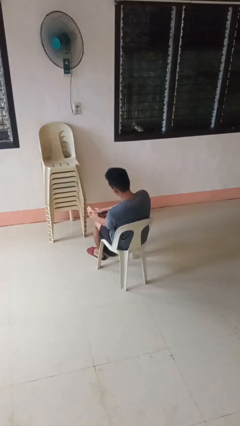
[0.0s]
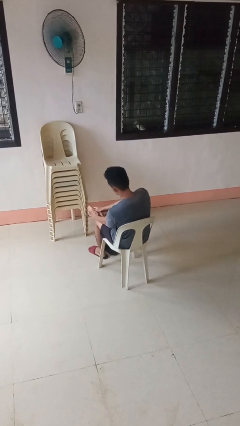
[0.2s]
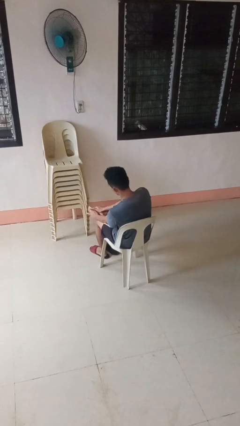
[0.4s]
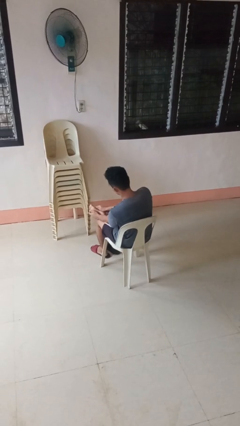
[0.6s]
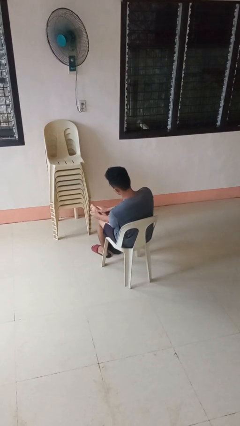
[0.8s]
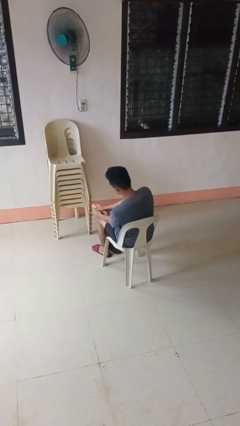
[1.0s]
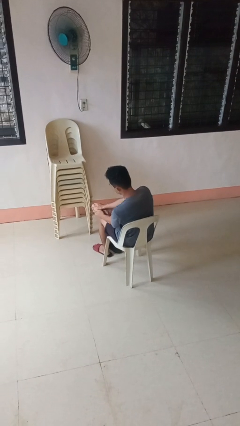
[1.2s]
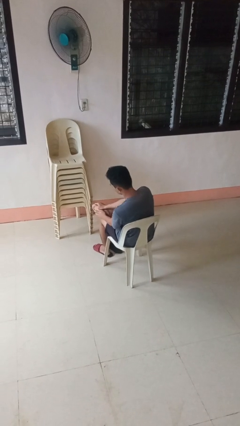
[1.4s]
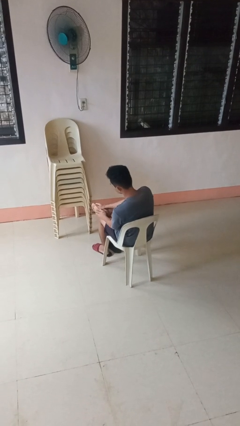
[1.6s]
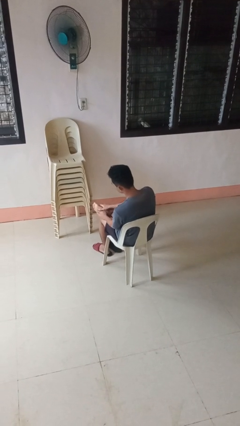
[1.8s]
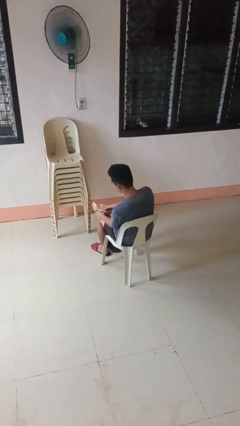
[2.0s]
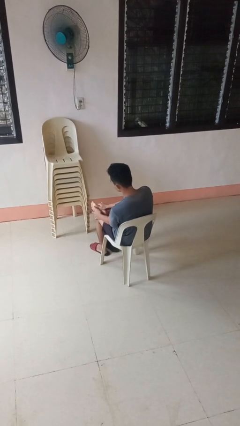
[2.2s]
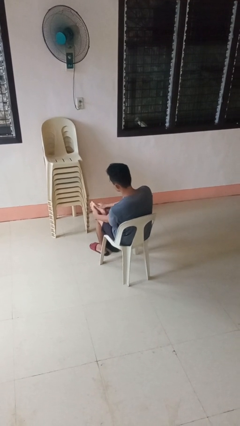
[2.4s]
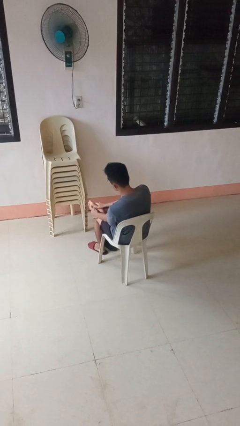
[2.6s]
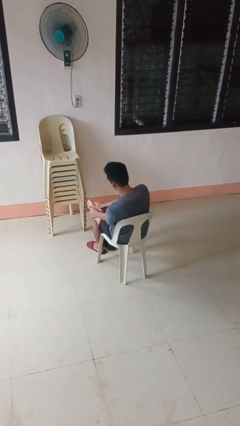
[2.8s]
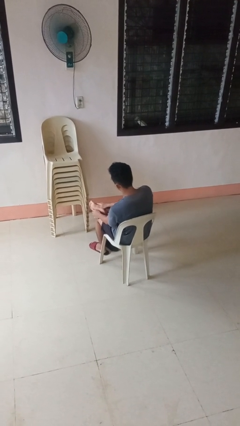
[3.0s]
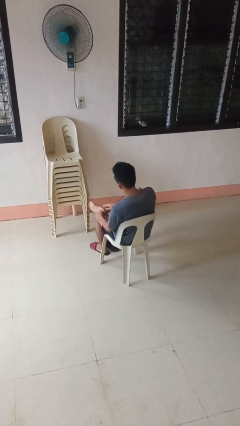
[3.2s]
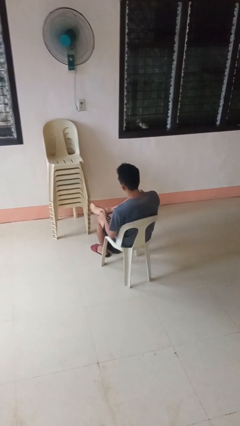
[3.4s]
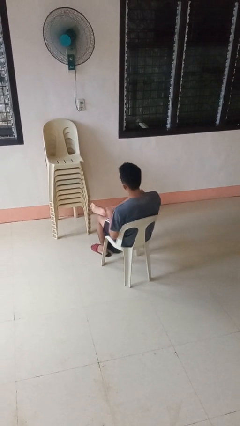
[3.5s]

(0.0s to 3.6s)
person rubs foot

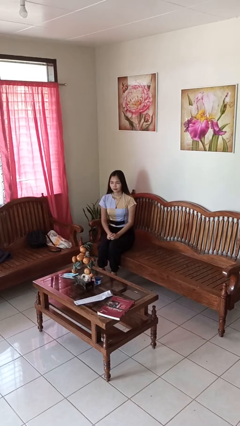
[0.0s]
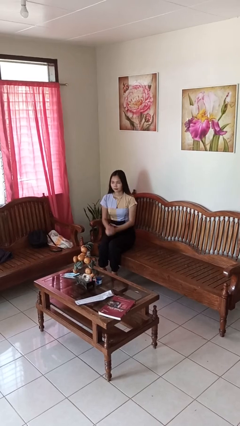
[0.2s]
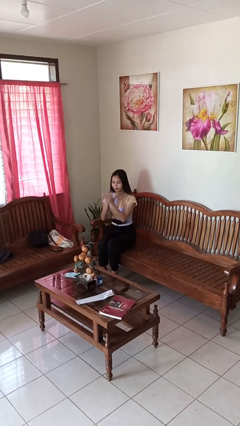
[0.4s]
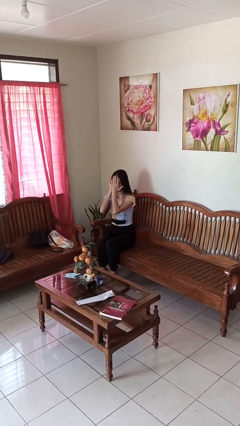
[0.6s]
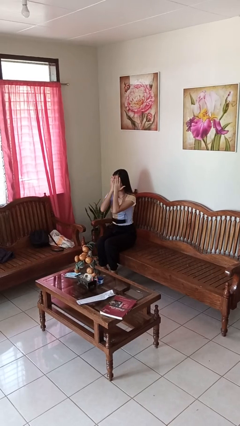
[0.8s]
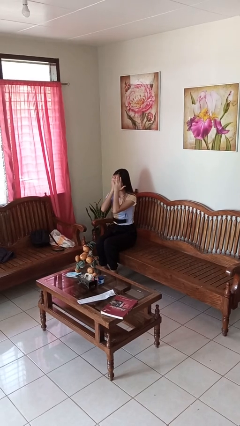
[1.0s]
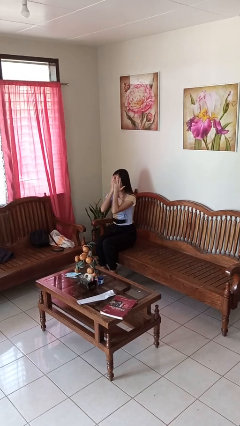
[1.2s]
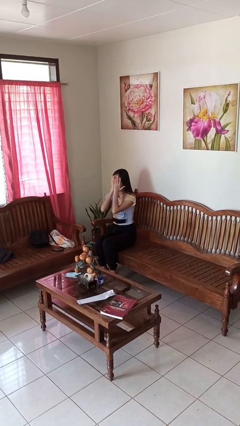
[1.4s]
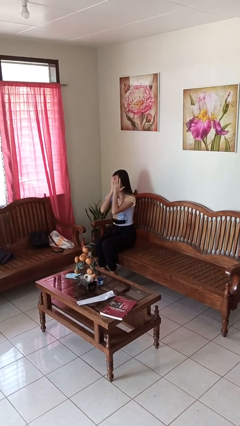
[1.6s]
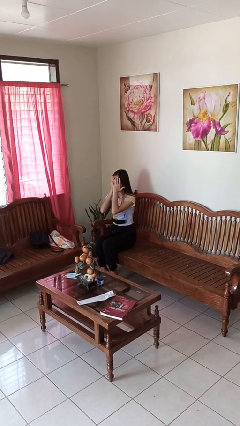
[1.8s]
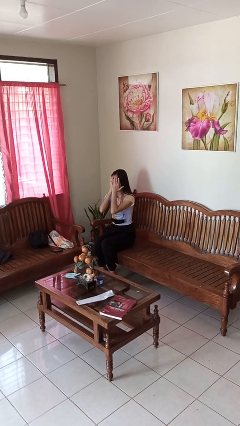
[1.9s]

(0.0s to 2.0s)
person covers face with hands

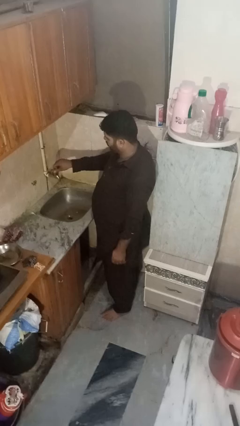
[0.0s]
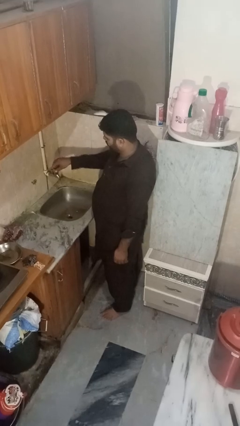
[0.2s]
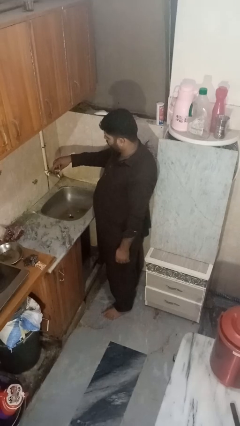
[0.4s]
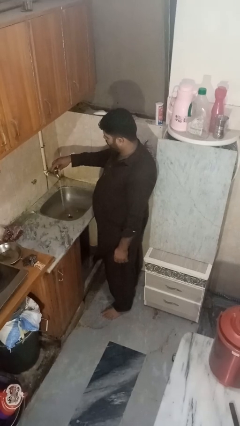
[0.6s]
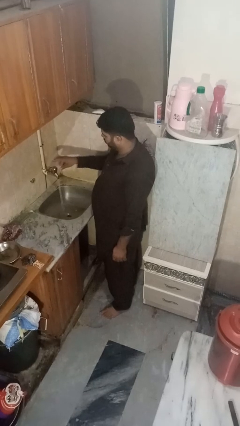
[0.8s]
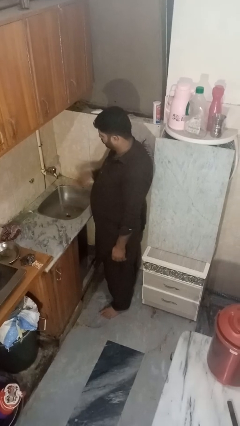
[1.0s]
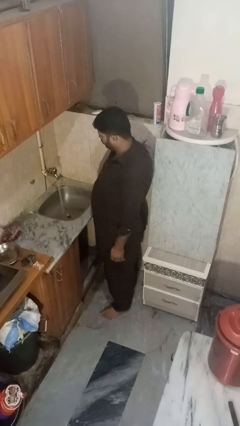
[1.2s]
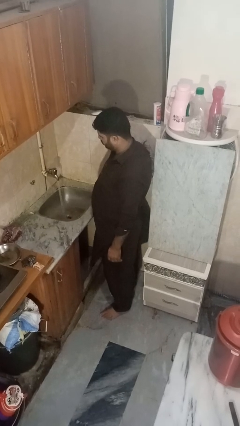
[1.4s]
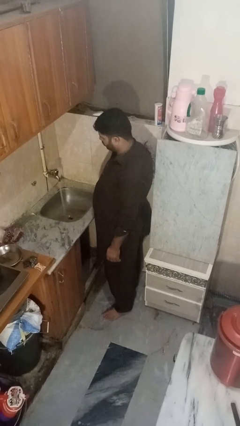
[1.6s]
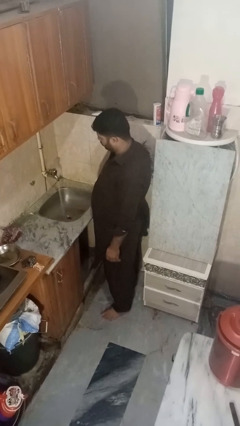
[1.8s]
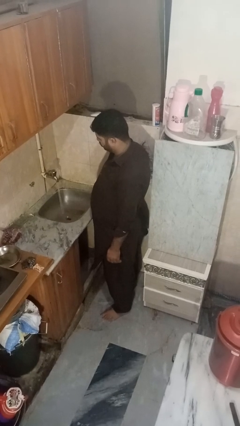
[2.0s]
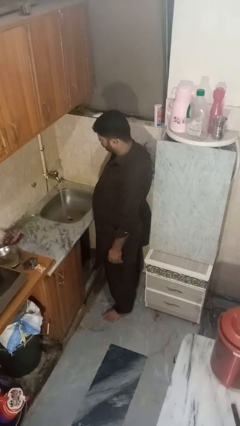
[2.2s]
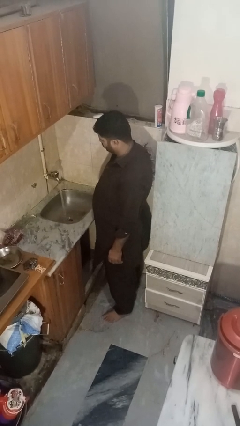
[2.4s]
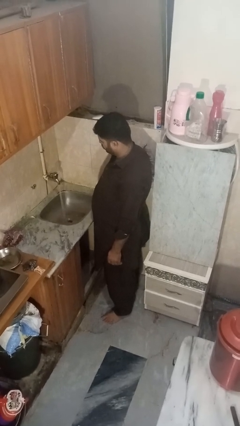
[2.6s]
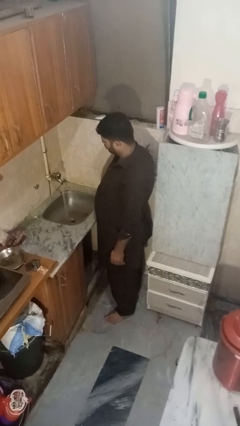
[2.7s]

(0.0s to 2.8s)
person turns on faucet

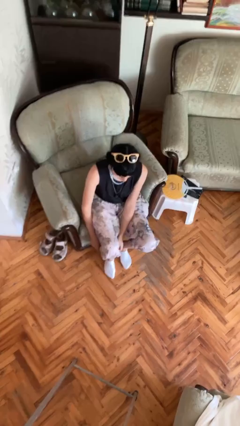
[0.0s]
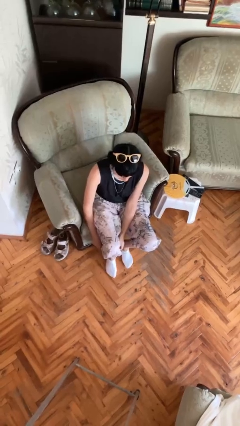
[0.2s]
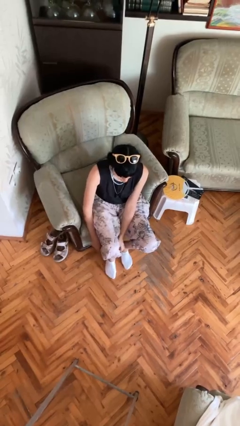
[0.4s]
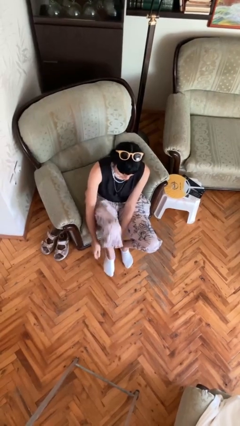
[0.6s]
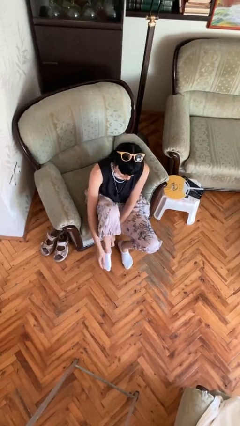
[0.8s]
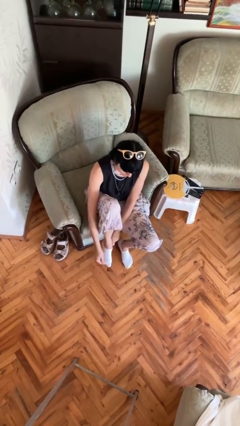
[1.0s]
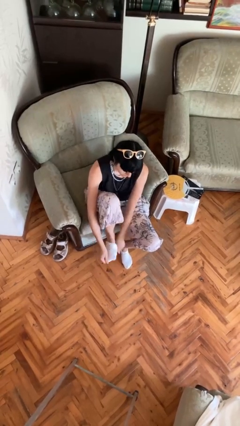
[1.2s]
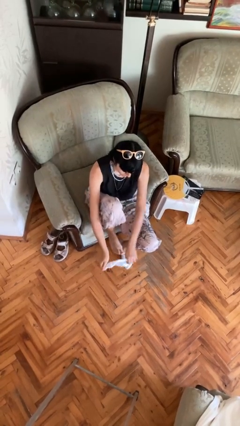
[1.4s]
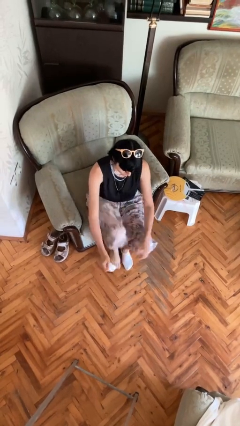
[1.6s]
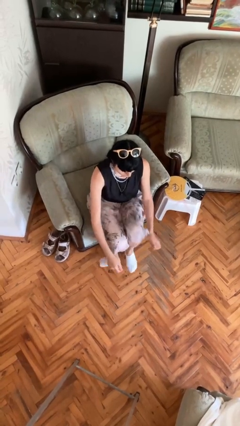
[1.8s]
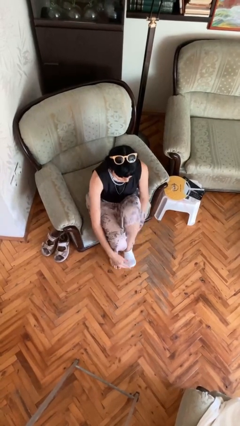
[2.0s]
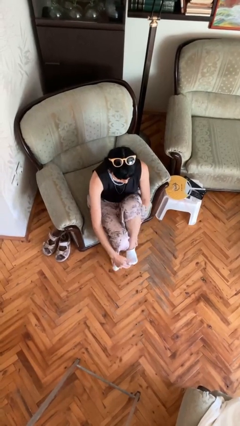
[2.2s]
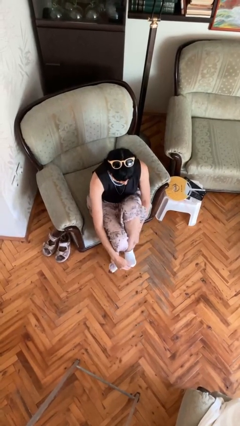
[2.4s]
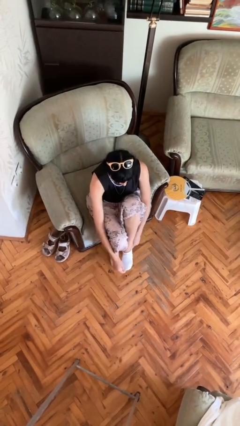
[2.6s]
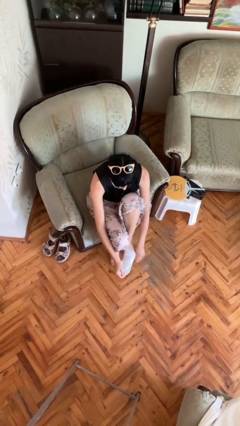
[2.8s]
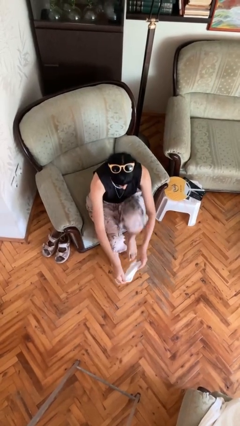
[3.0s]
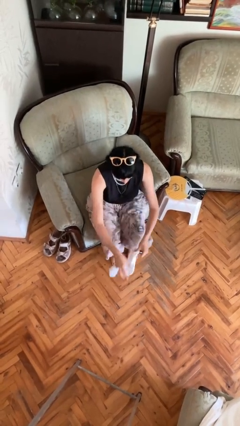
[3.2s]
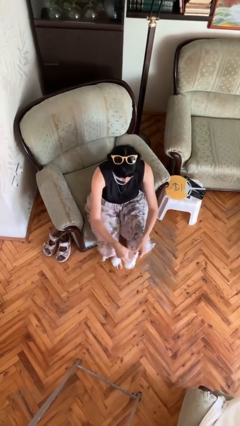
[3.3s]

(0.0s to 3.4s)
person takes off socks

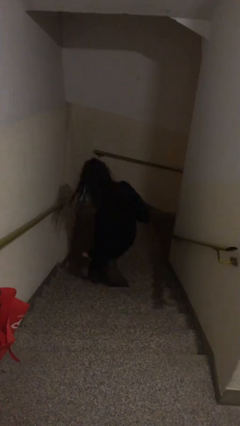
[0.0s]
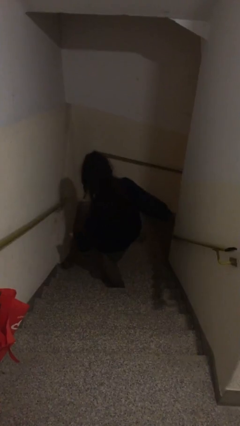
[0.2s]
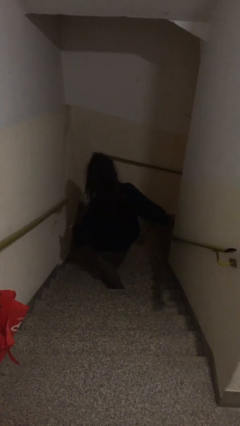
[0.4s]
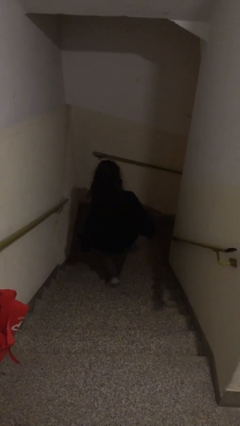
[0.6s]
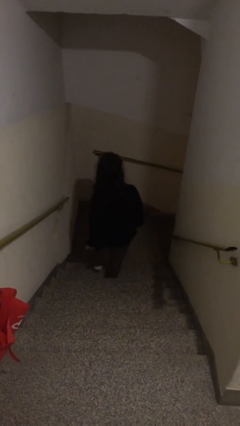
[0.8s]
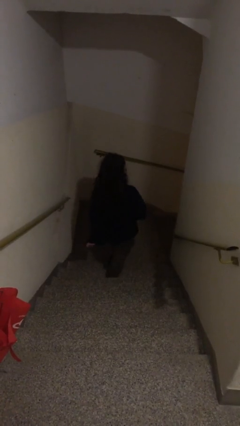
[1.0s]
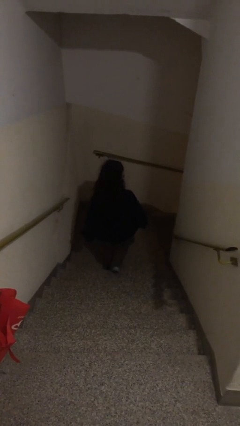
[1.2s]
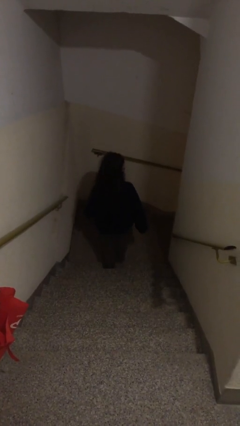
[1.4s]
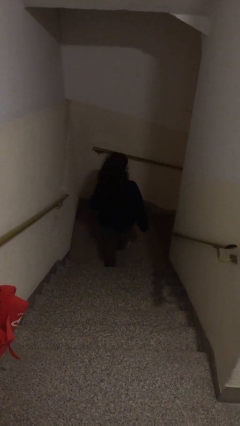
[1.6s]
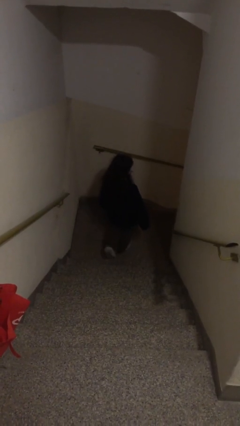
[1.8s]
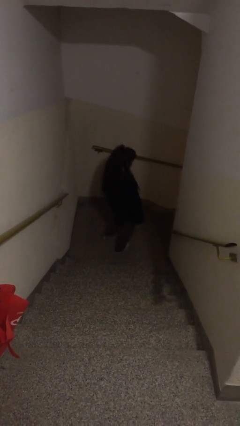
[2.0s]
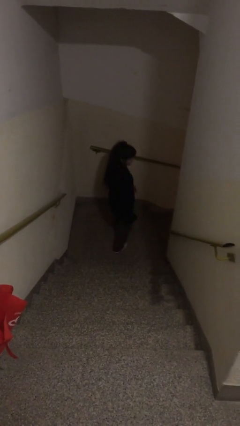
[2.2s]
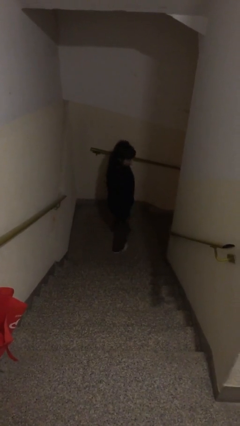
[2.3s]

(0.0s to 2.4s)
person climbs down stairs

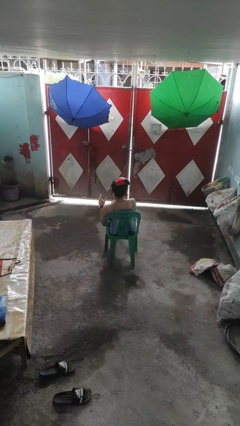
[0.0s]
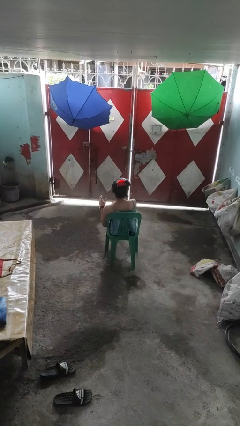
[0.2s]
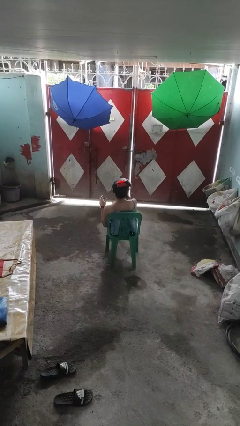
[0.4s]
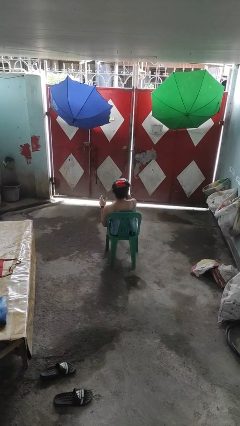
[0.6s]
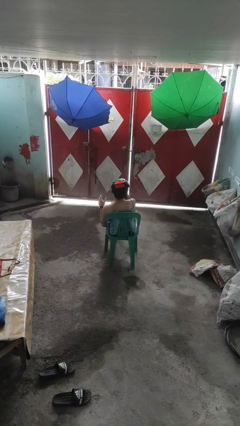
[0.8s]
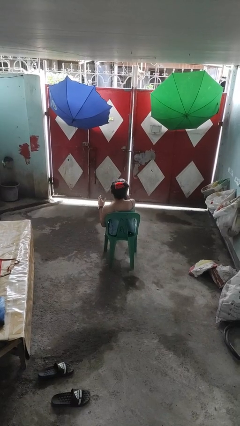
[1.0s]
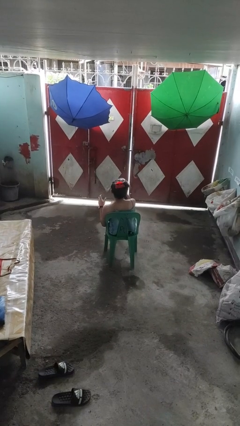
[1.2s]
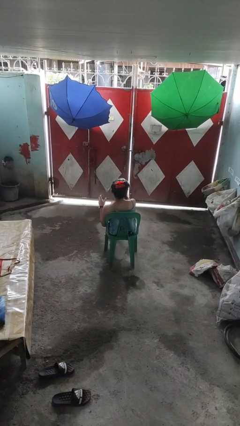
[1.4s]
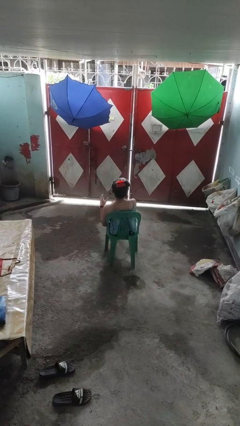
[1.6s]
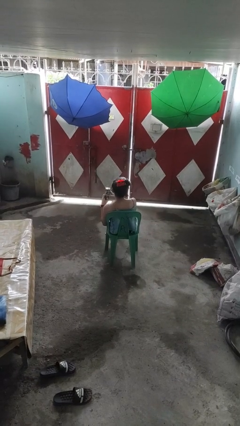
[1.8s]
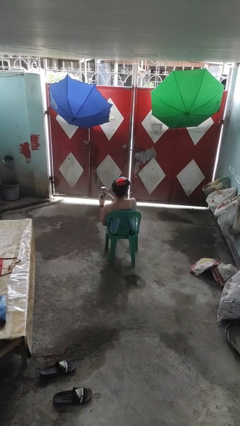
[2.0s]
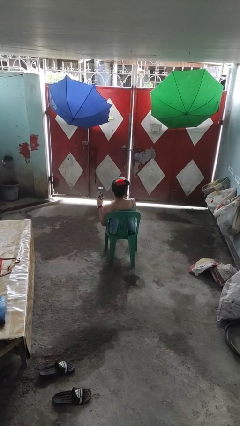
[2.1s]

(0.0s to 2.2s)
person drinks from beverage can

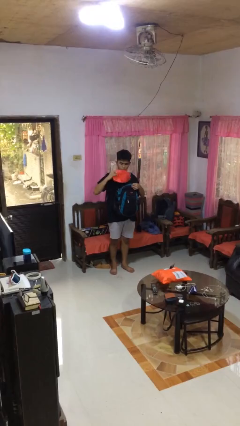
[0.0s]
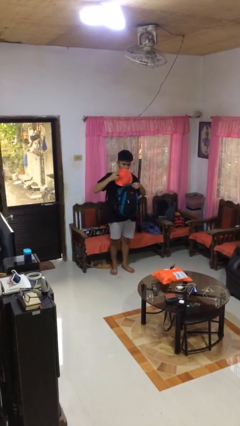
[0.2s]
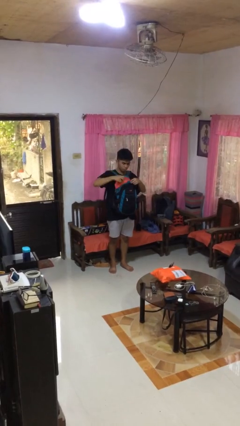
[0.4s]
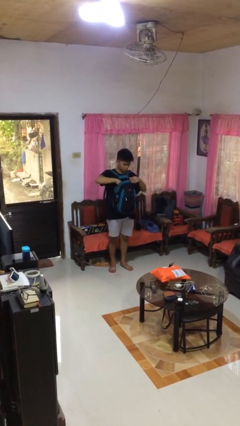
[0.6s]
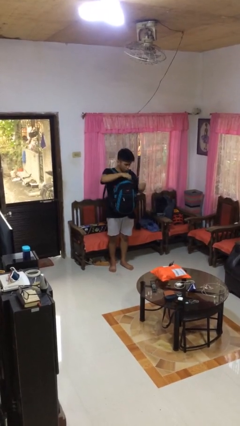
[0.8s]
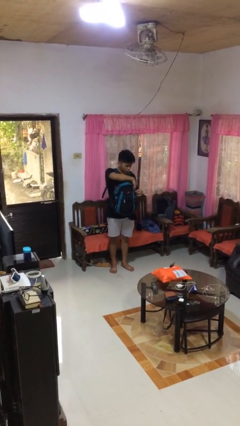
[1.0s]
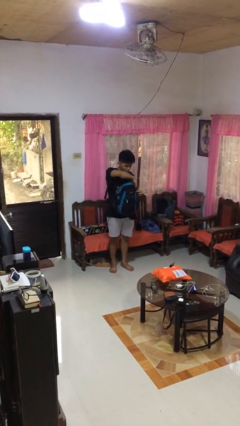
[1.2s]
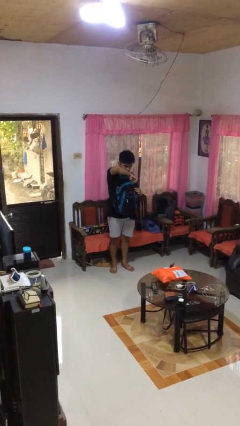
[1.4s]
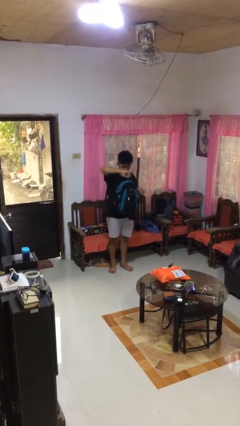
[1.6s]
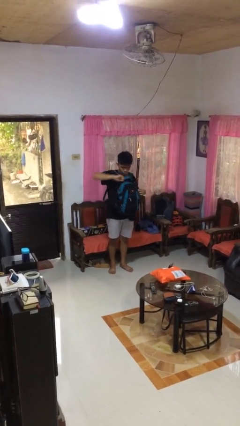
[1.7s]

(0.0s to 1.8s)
person puts object into backpack
